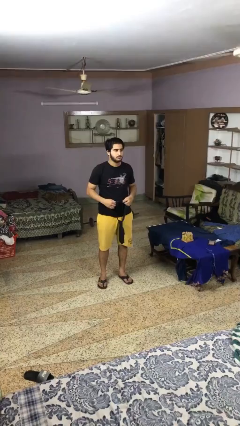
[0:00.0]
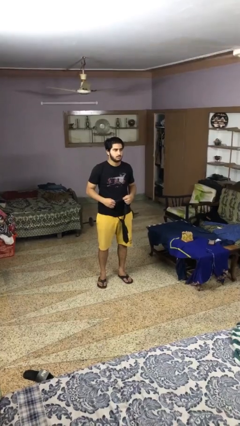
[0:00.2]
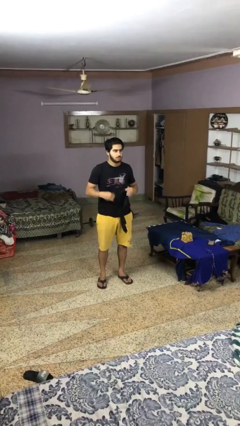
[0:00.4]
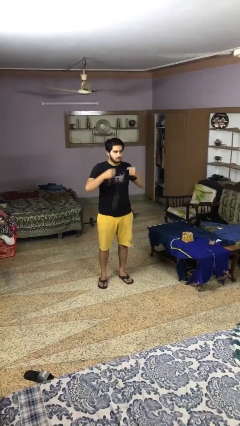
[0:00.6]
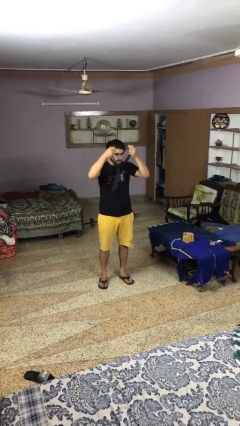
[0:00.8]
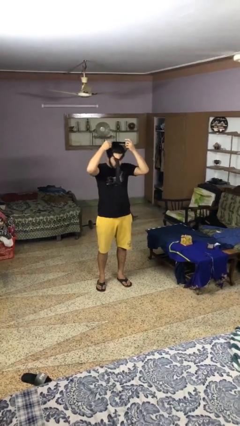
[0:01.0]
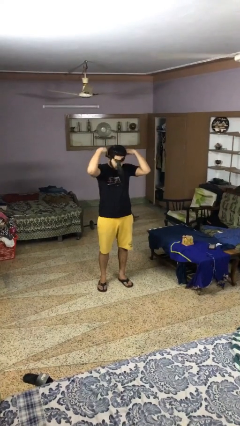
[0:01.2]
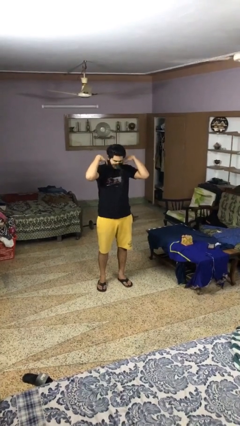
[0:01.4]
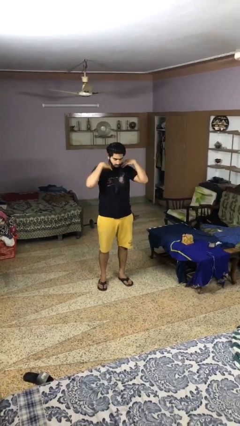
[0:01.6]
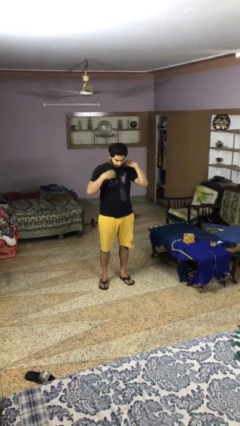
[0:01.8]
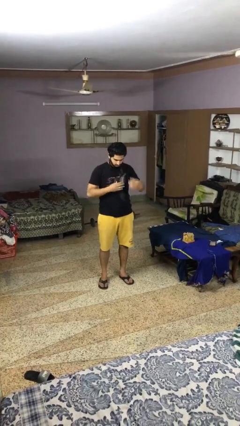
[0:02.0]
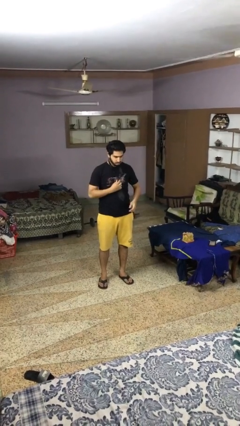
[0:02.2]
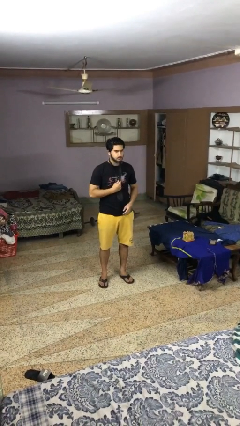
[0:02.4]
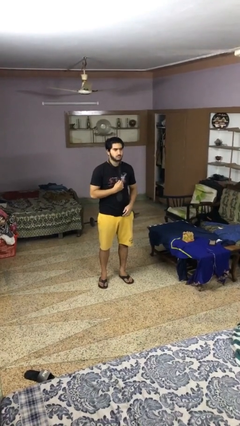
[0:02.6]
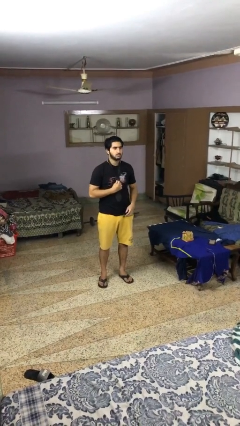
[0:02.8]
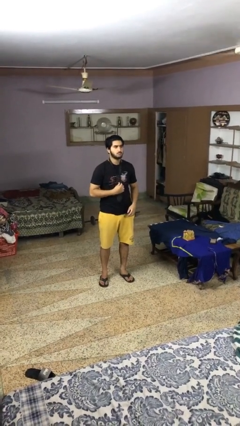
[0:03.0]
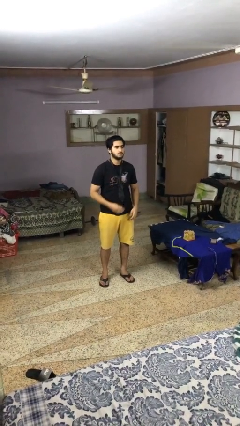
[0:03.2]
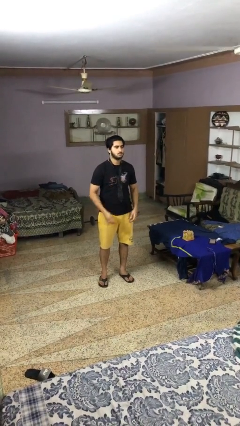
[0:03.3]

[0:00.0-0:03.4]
person puts on necktie

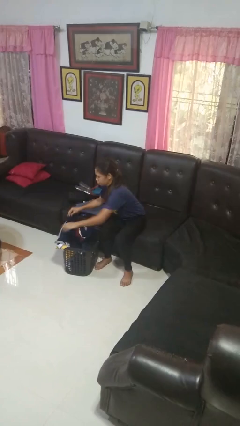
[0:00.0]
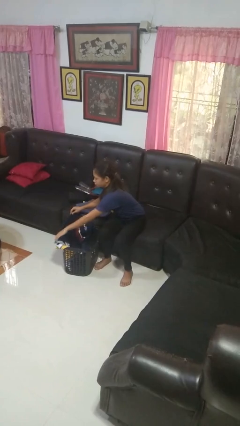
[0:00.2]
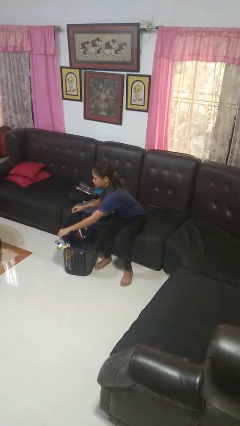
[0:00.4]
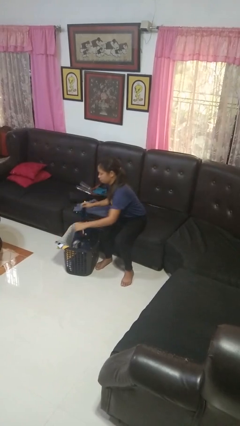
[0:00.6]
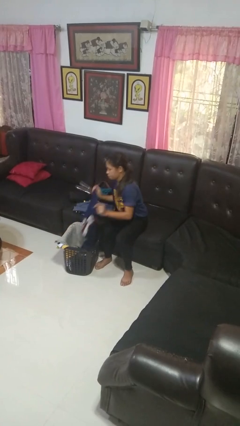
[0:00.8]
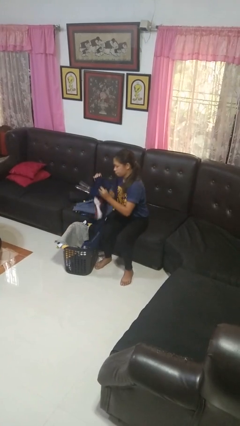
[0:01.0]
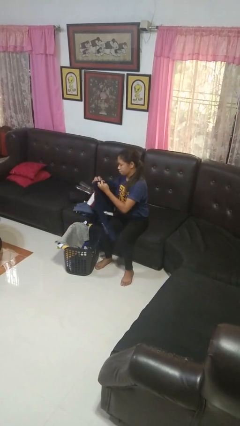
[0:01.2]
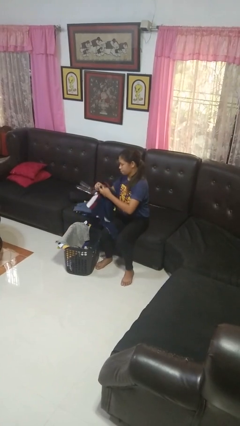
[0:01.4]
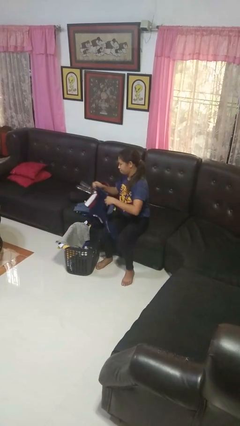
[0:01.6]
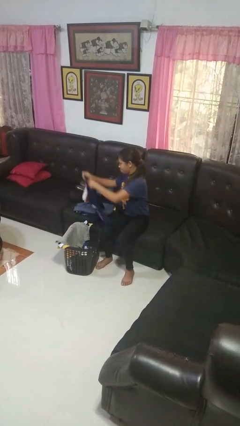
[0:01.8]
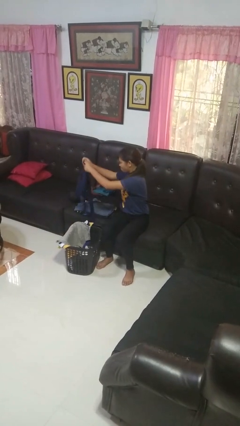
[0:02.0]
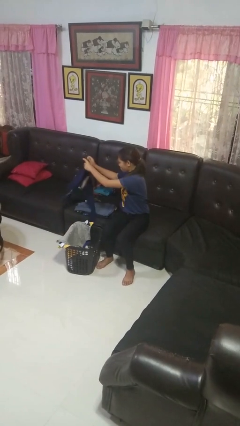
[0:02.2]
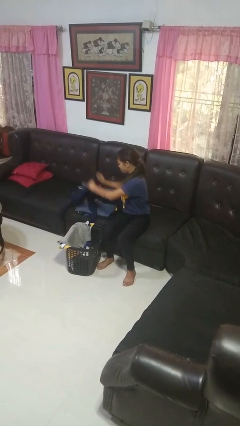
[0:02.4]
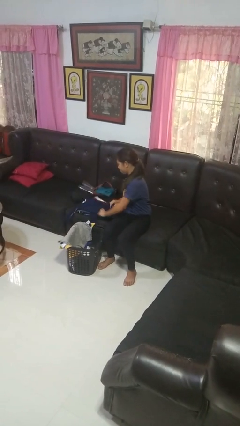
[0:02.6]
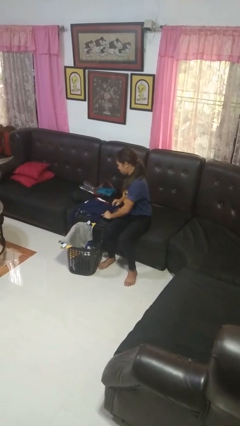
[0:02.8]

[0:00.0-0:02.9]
person folds shirt

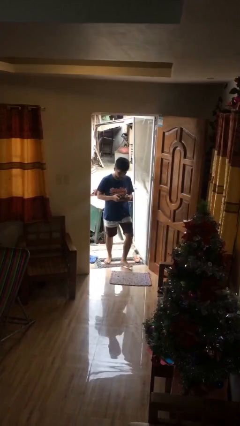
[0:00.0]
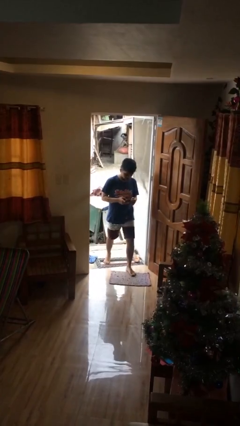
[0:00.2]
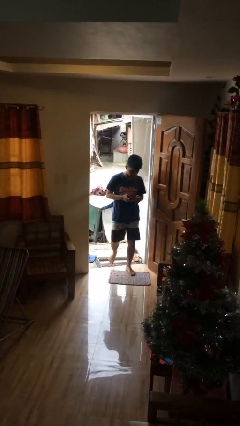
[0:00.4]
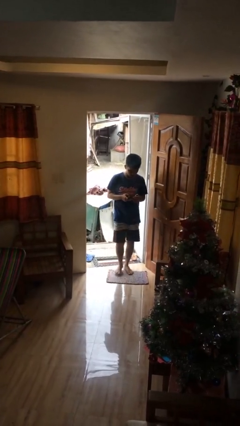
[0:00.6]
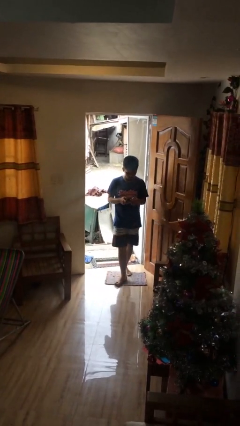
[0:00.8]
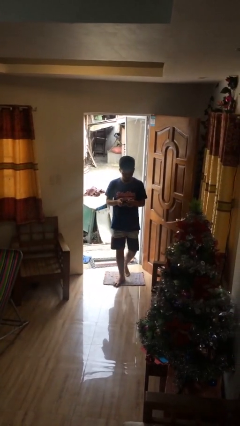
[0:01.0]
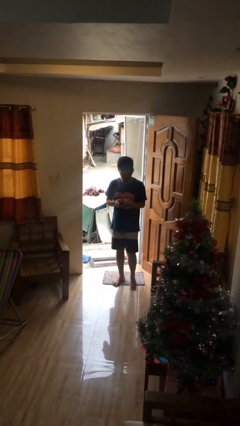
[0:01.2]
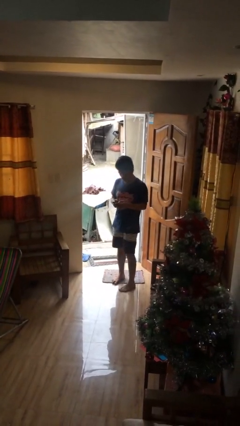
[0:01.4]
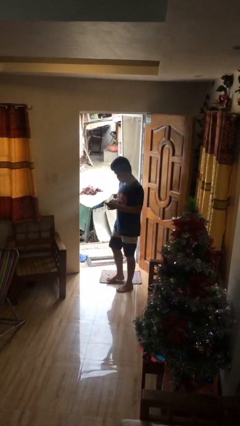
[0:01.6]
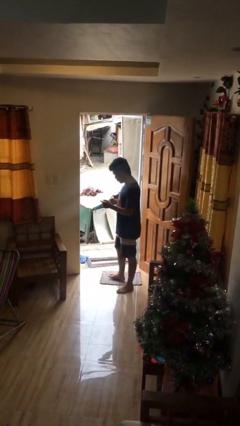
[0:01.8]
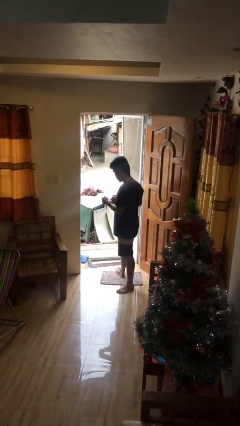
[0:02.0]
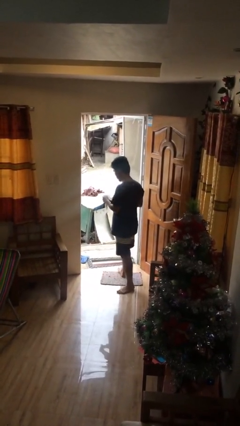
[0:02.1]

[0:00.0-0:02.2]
person enters scene through structure

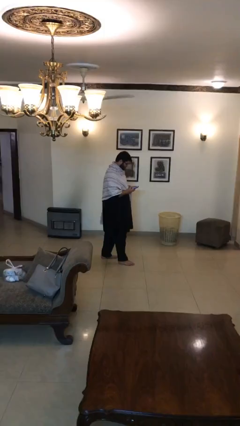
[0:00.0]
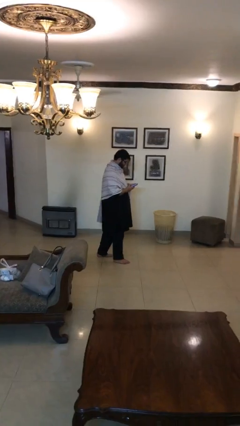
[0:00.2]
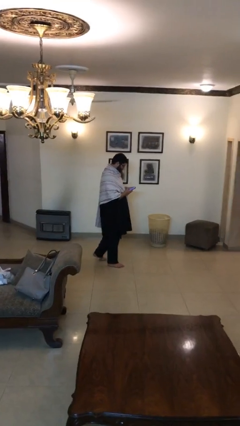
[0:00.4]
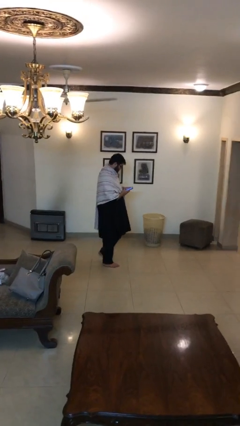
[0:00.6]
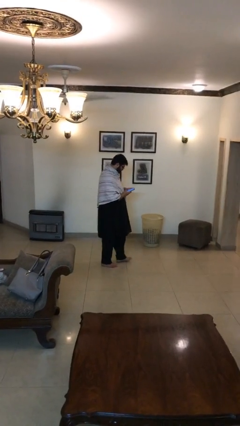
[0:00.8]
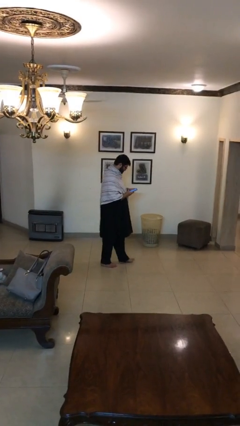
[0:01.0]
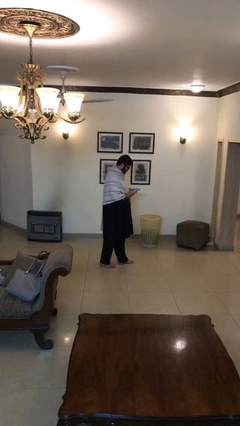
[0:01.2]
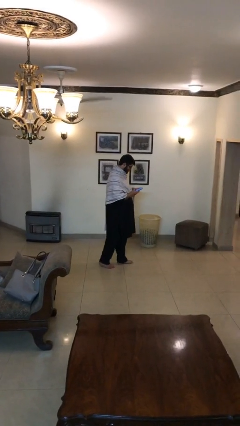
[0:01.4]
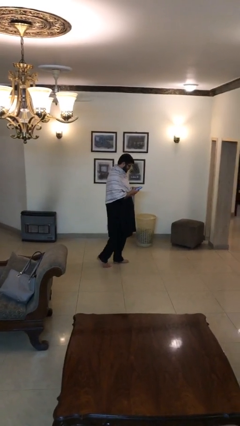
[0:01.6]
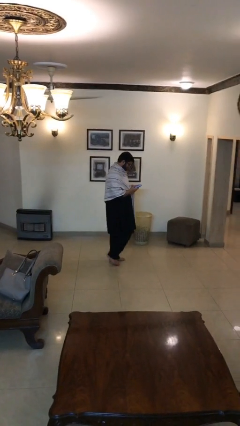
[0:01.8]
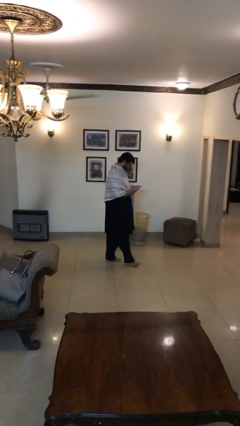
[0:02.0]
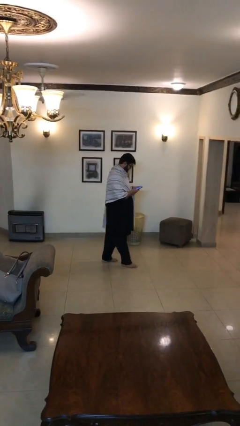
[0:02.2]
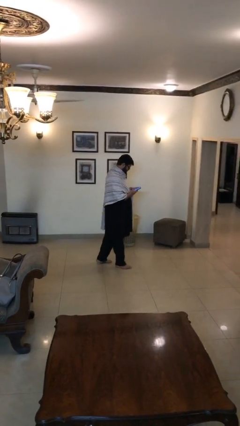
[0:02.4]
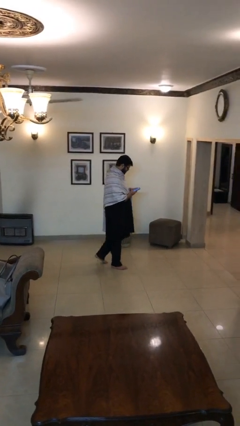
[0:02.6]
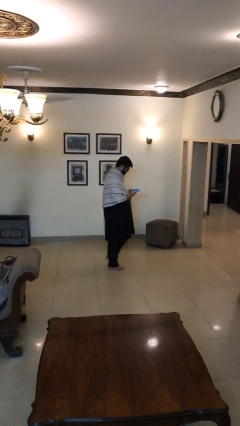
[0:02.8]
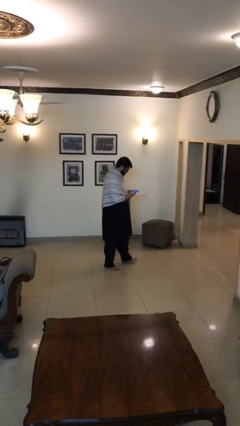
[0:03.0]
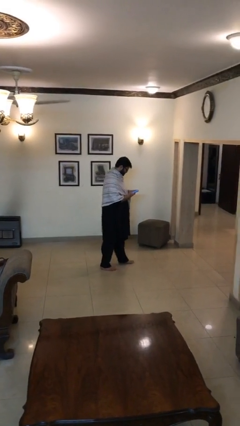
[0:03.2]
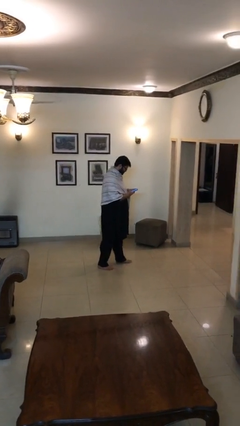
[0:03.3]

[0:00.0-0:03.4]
person texts on phone

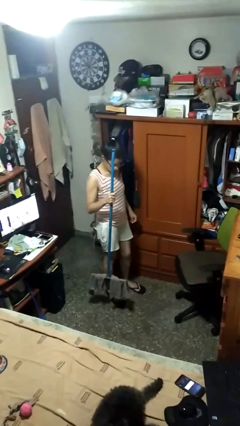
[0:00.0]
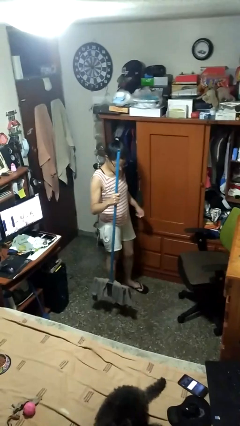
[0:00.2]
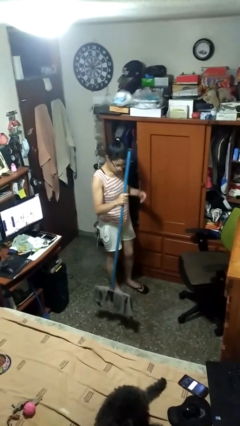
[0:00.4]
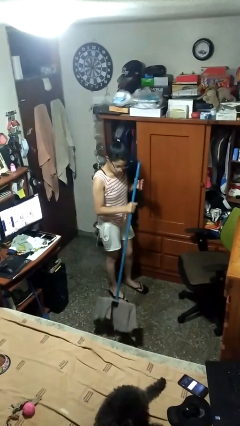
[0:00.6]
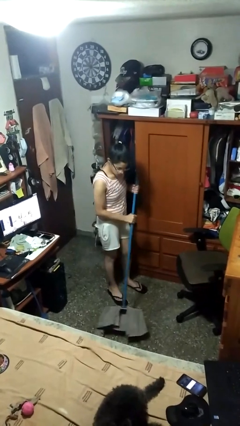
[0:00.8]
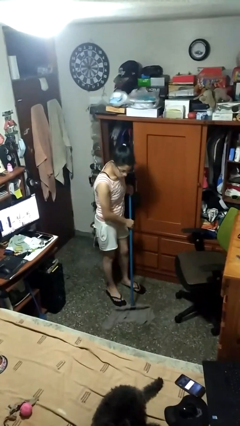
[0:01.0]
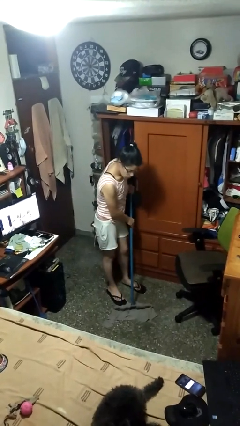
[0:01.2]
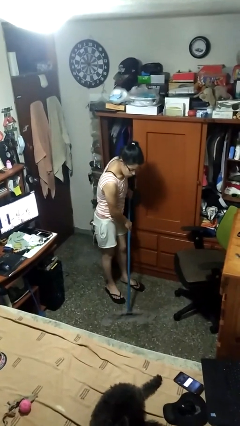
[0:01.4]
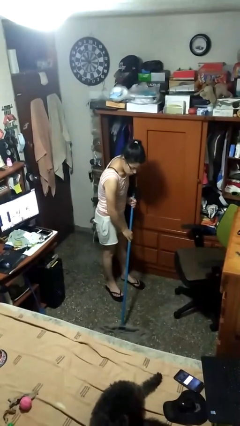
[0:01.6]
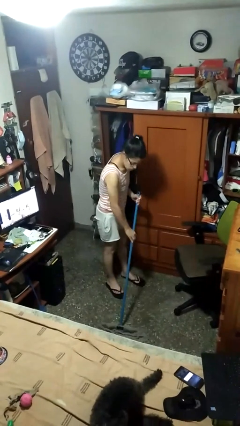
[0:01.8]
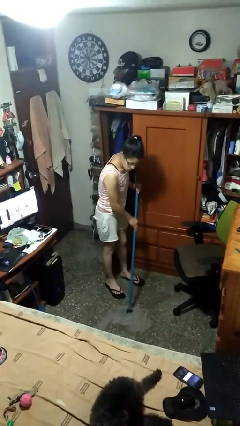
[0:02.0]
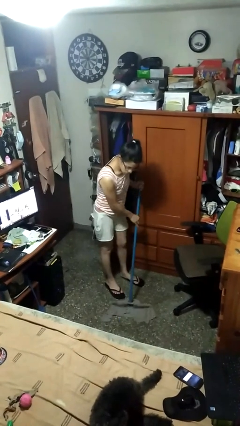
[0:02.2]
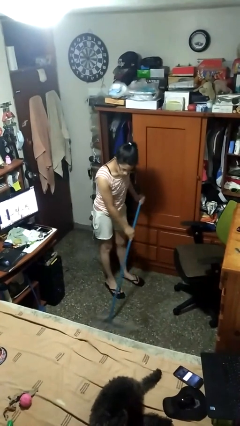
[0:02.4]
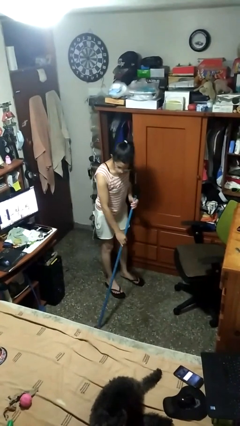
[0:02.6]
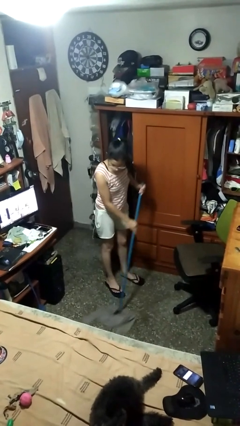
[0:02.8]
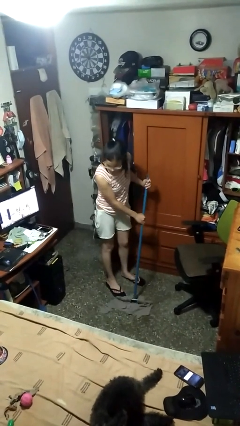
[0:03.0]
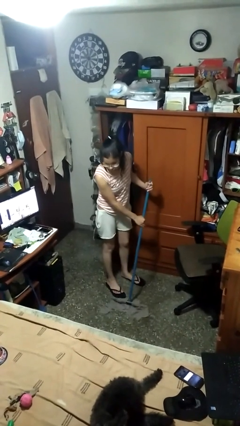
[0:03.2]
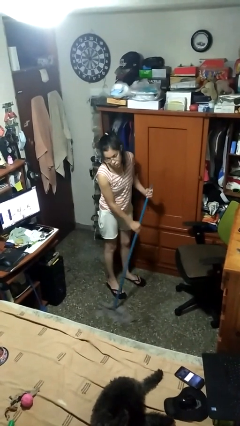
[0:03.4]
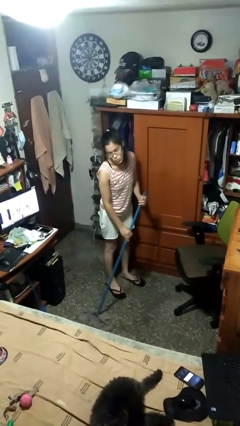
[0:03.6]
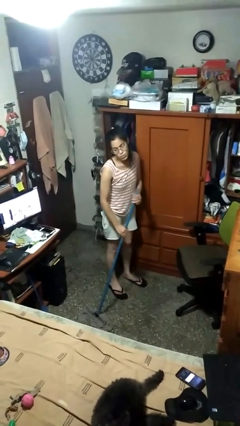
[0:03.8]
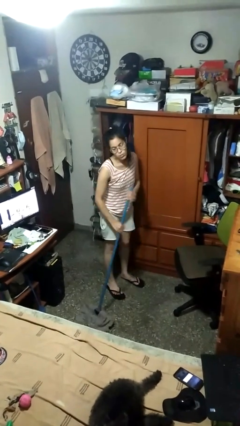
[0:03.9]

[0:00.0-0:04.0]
person mops

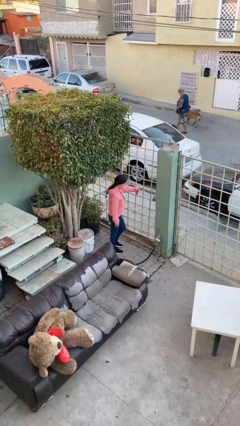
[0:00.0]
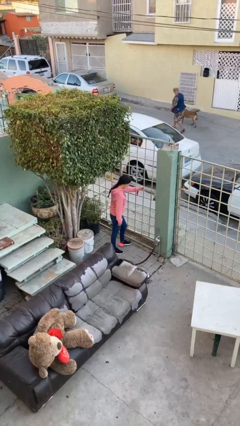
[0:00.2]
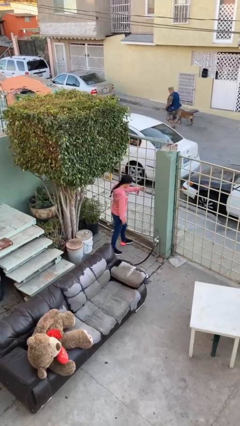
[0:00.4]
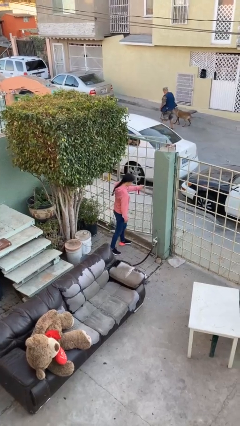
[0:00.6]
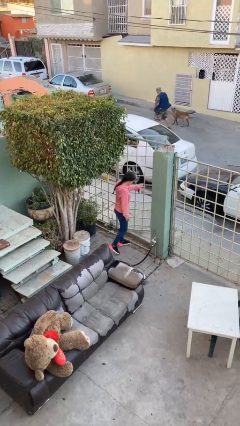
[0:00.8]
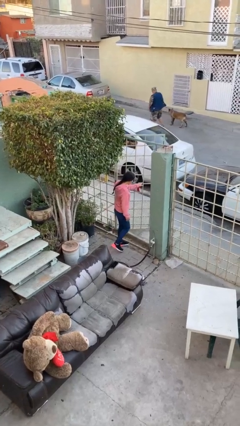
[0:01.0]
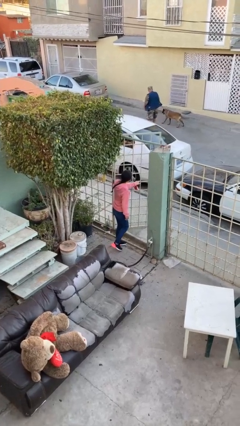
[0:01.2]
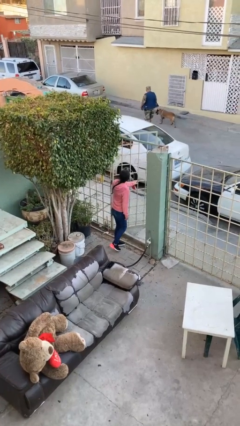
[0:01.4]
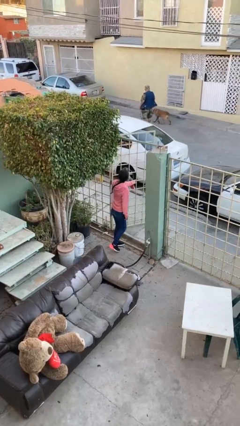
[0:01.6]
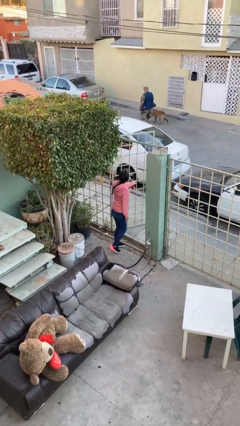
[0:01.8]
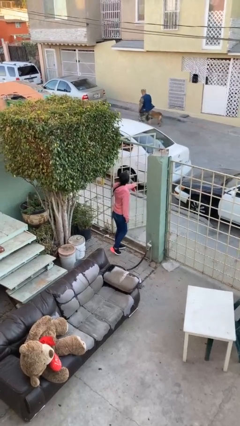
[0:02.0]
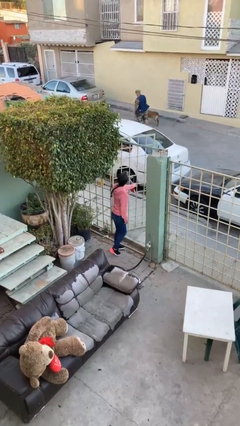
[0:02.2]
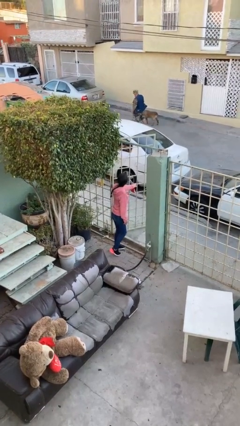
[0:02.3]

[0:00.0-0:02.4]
person opens facility door
